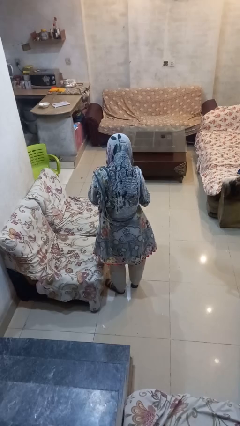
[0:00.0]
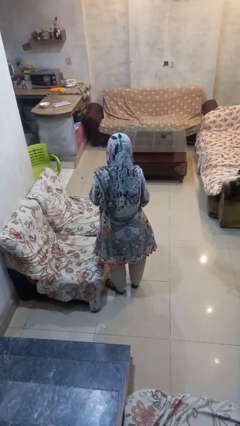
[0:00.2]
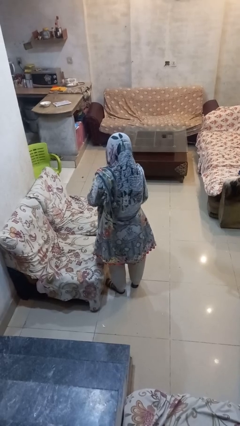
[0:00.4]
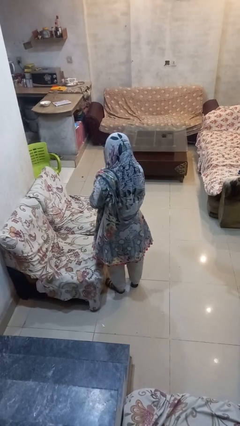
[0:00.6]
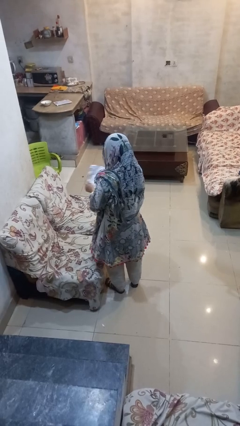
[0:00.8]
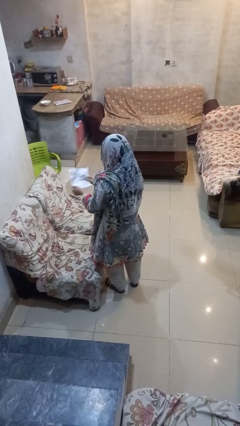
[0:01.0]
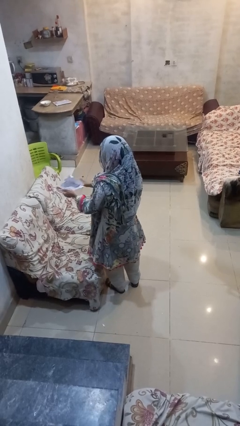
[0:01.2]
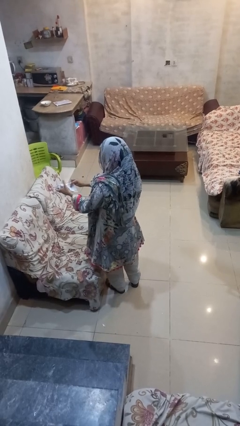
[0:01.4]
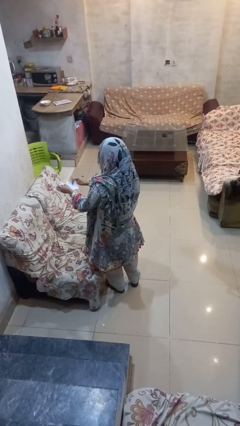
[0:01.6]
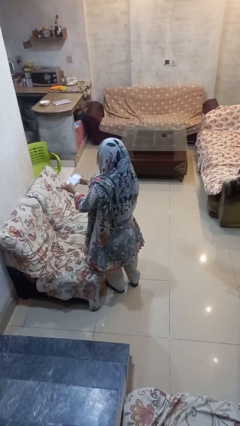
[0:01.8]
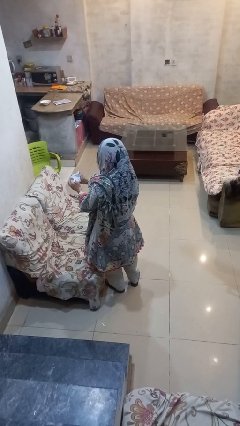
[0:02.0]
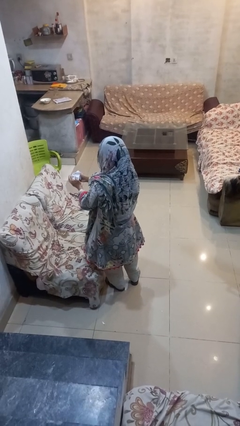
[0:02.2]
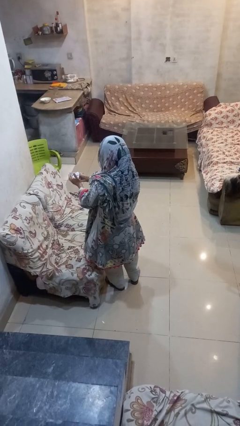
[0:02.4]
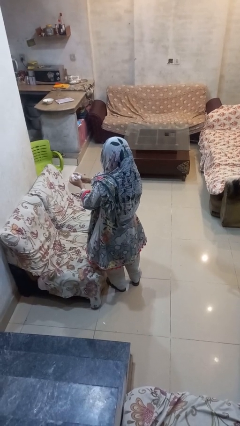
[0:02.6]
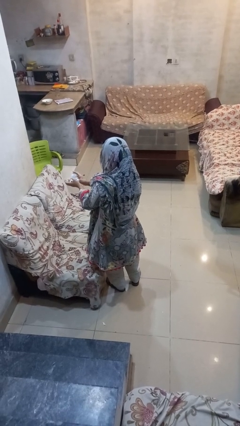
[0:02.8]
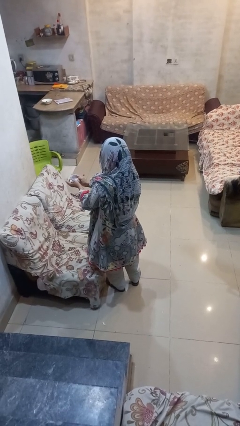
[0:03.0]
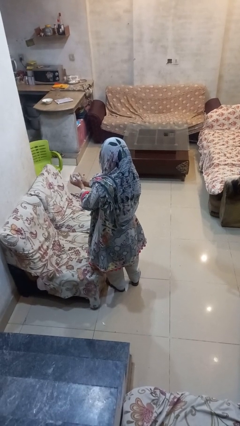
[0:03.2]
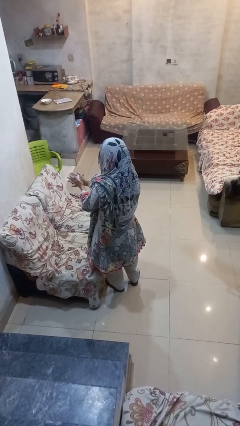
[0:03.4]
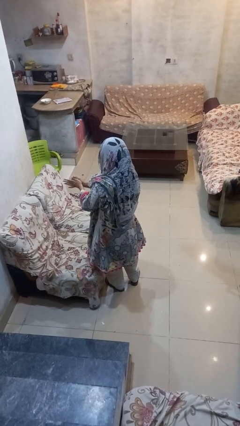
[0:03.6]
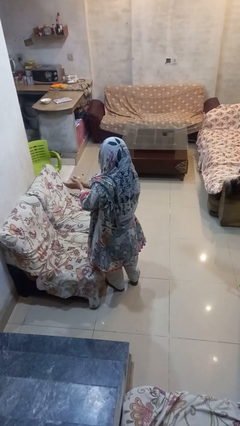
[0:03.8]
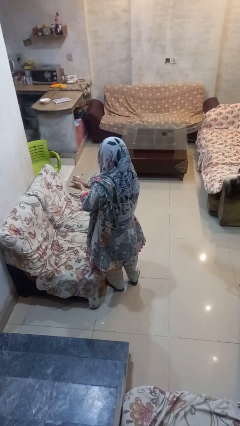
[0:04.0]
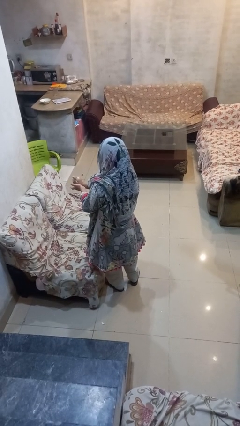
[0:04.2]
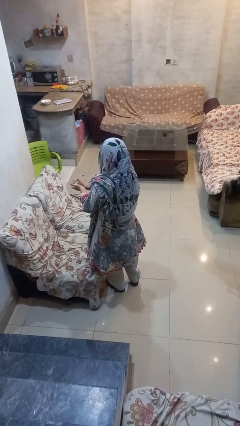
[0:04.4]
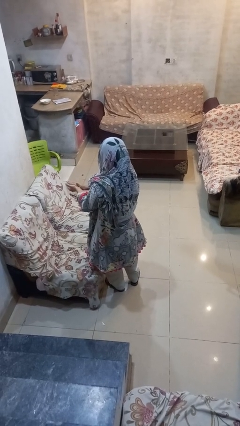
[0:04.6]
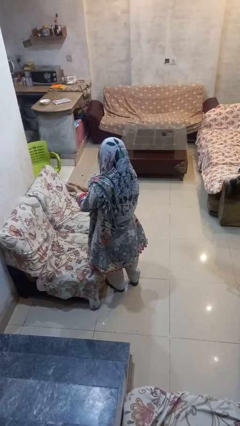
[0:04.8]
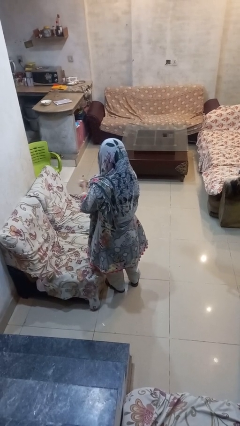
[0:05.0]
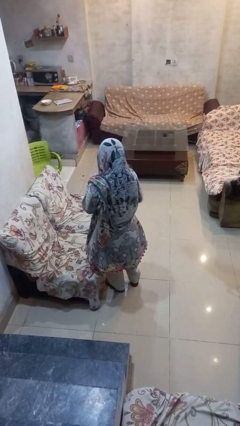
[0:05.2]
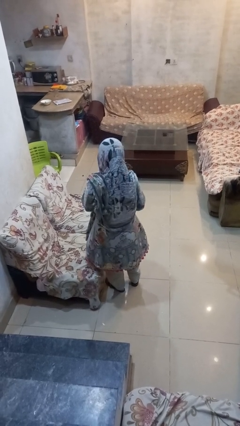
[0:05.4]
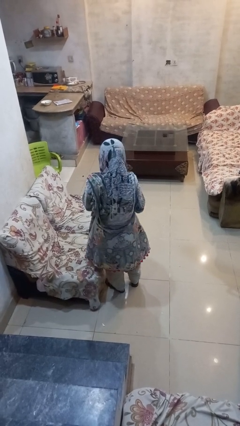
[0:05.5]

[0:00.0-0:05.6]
person crumples paper

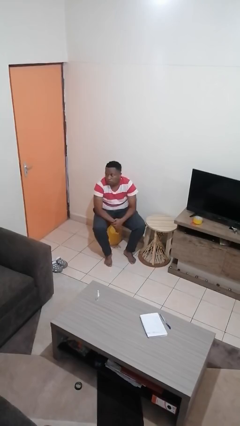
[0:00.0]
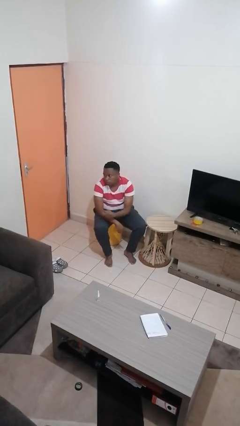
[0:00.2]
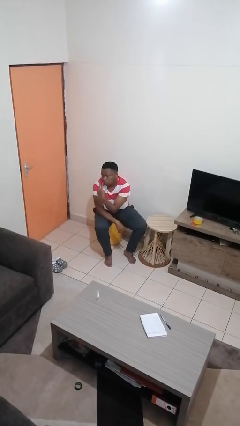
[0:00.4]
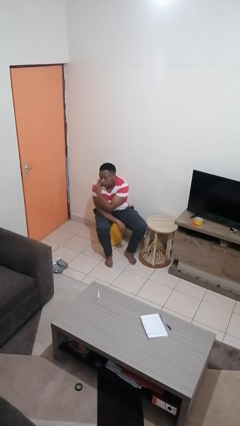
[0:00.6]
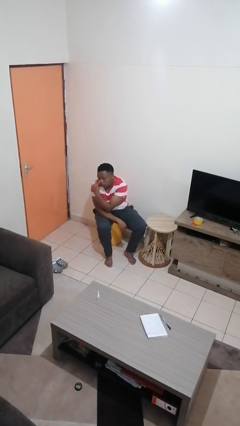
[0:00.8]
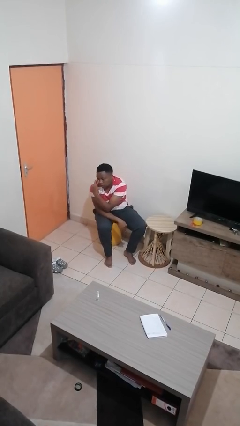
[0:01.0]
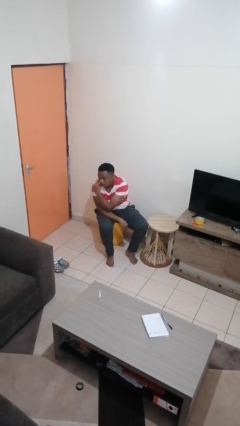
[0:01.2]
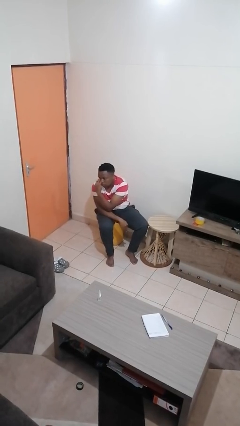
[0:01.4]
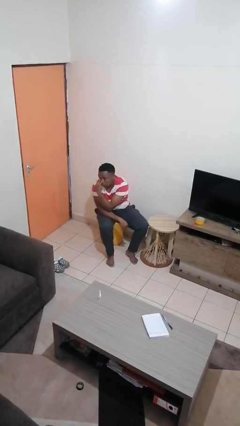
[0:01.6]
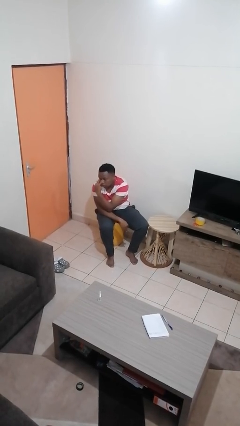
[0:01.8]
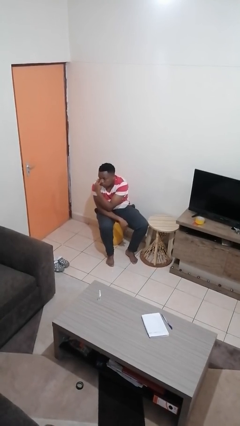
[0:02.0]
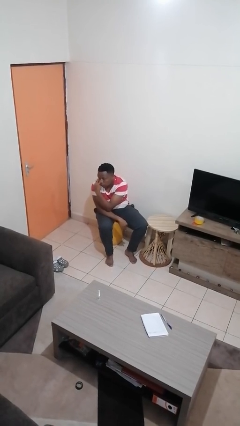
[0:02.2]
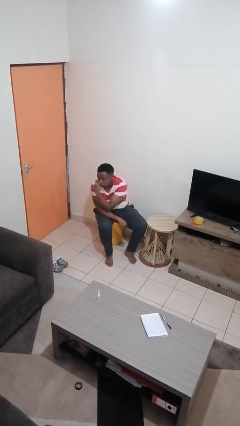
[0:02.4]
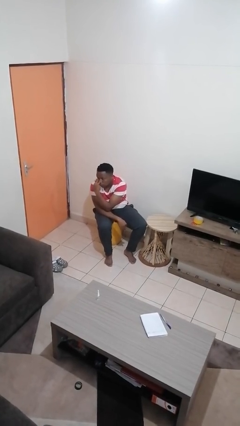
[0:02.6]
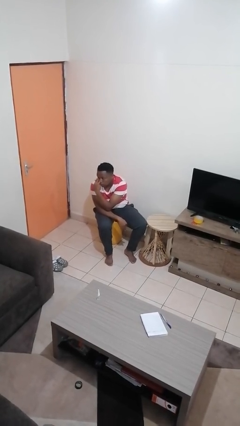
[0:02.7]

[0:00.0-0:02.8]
person gestures watch closely

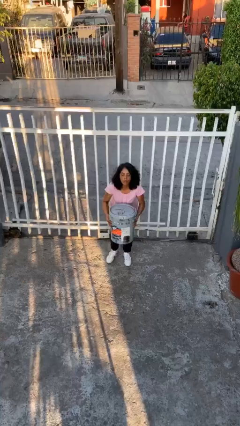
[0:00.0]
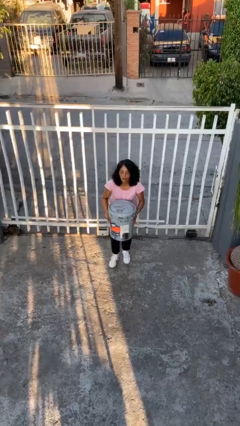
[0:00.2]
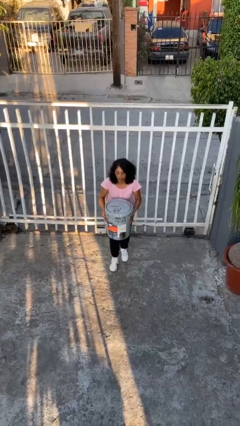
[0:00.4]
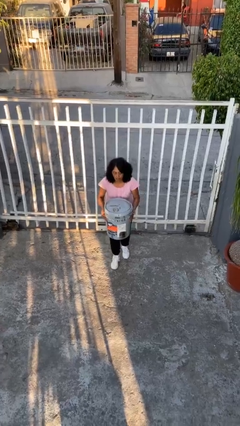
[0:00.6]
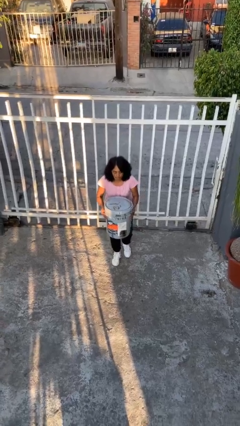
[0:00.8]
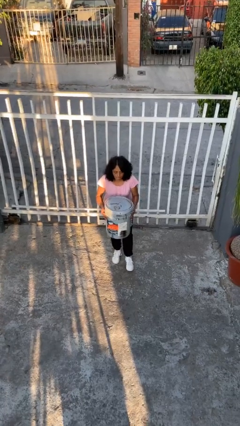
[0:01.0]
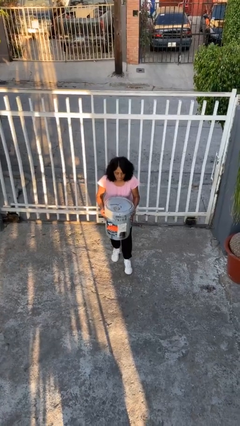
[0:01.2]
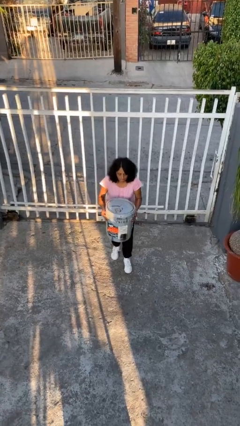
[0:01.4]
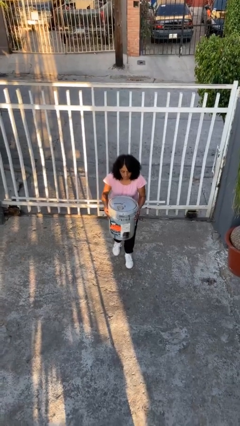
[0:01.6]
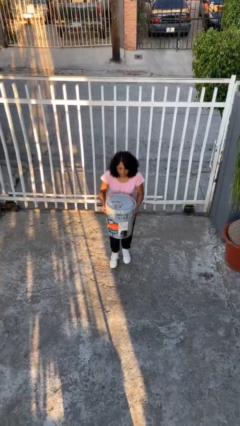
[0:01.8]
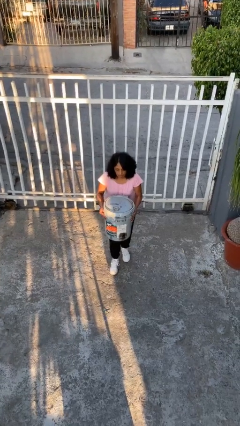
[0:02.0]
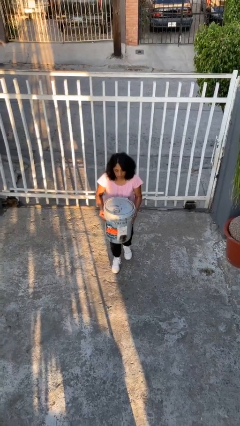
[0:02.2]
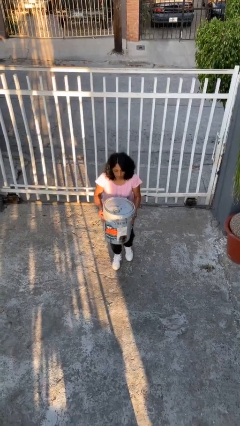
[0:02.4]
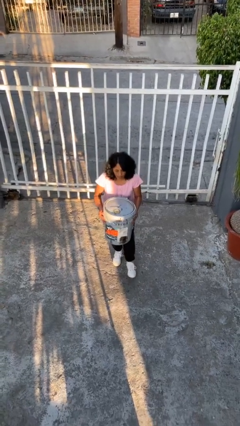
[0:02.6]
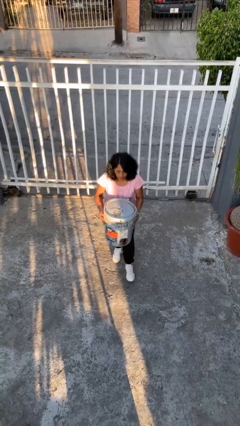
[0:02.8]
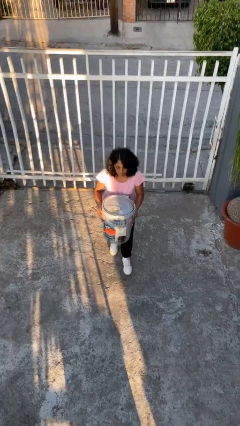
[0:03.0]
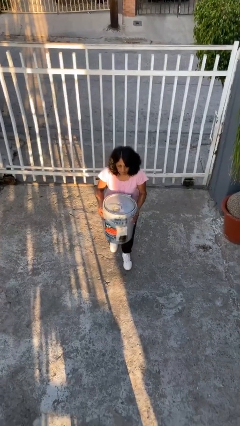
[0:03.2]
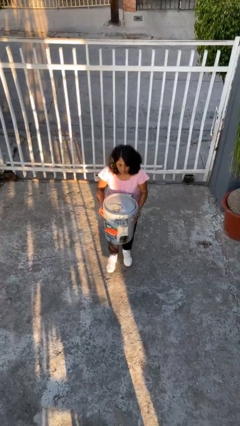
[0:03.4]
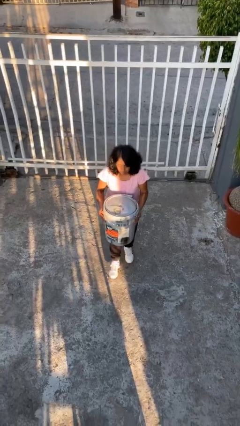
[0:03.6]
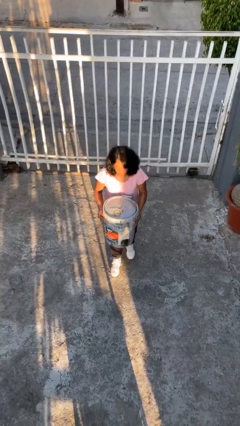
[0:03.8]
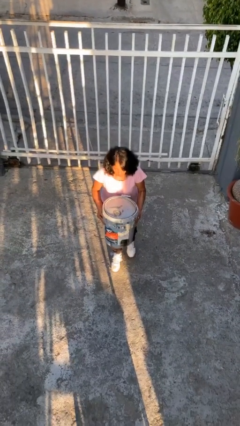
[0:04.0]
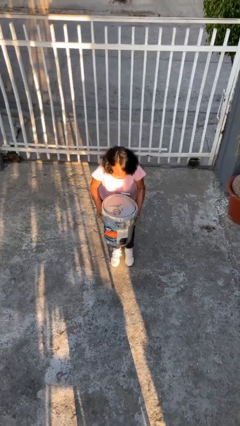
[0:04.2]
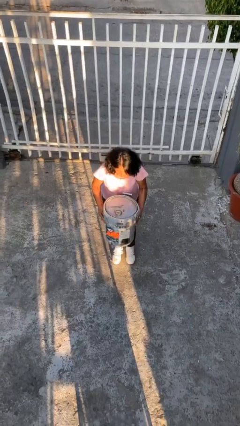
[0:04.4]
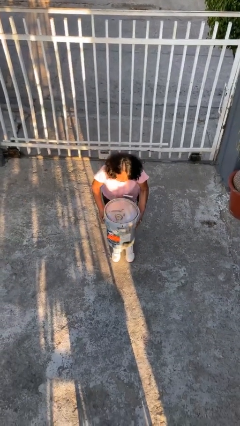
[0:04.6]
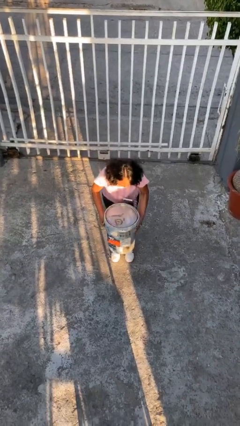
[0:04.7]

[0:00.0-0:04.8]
person carries heavy object

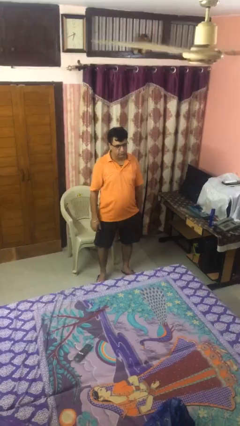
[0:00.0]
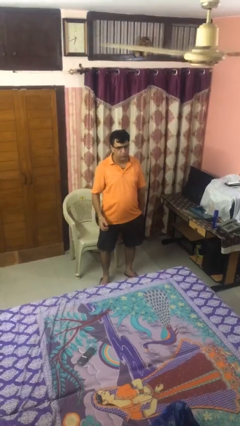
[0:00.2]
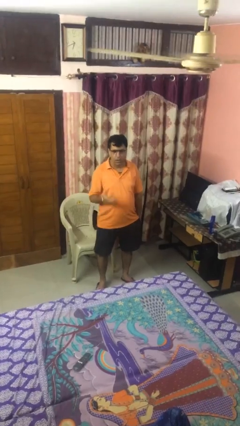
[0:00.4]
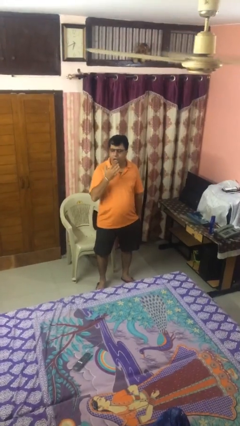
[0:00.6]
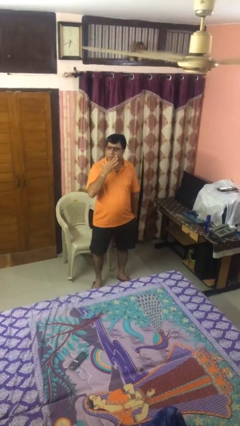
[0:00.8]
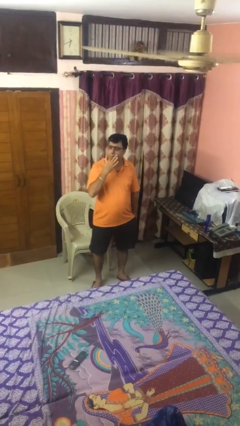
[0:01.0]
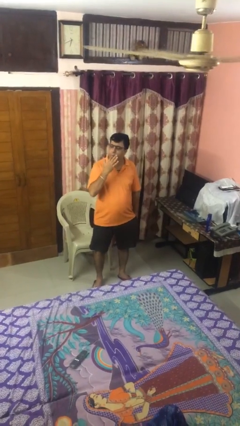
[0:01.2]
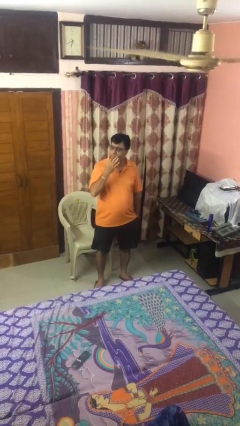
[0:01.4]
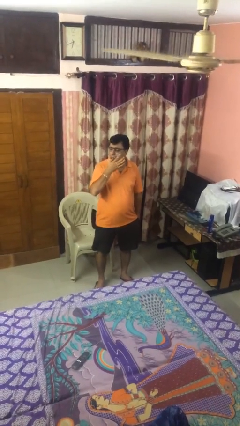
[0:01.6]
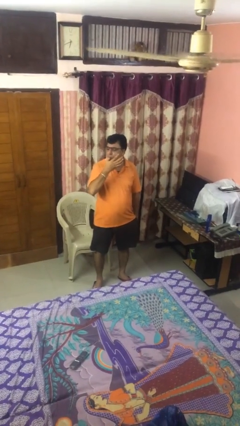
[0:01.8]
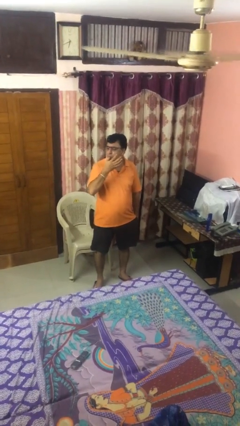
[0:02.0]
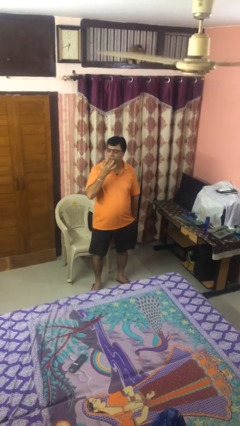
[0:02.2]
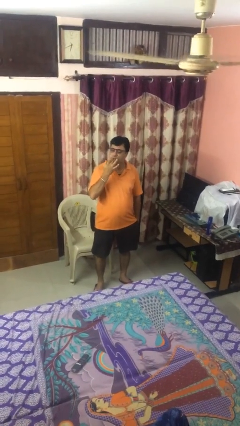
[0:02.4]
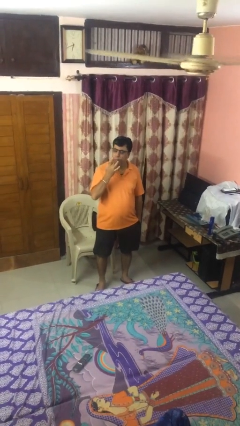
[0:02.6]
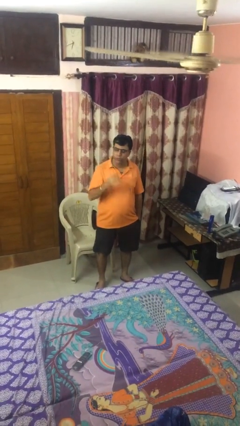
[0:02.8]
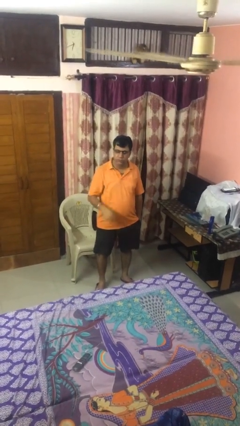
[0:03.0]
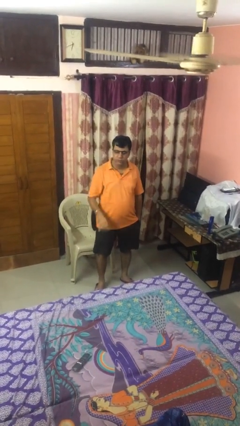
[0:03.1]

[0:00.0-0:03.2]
person licks fingers

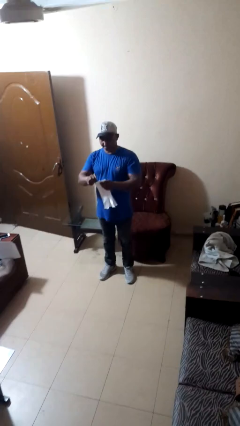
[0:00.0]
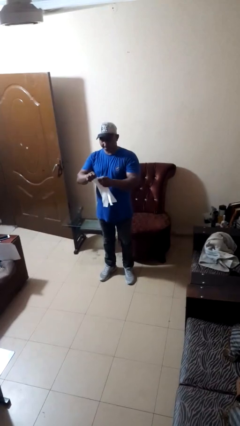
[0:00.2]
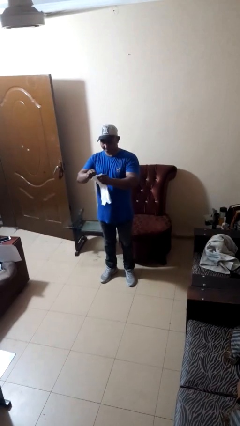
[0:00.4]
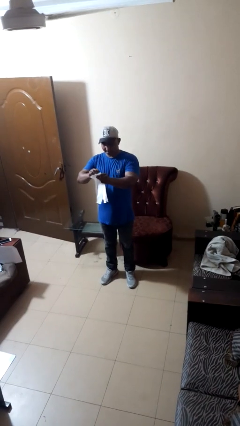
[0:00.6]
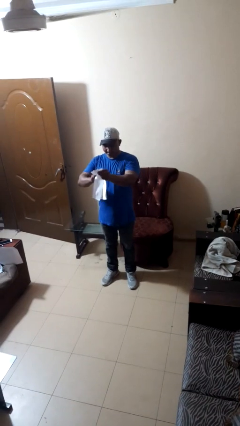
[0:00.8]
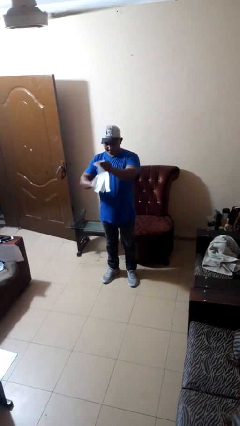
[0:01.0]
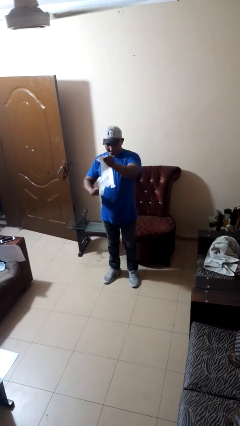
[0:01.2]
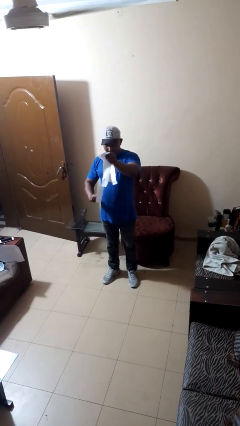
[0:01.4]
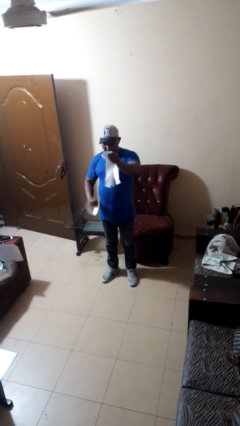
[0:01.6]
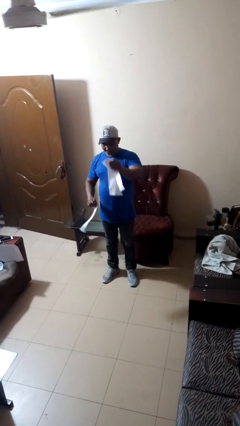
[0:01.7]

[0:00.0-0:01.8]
person tears paper
